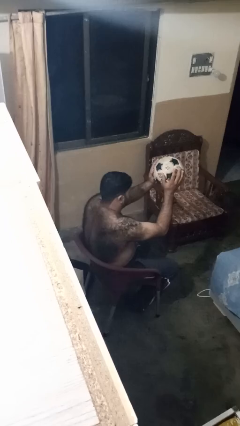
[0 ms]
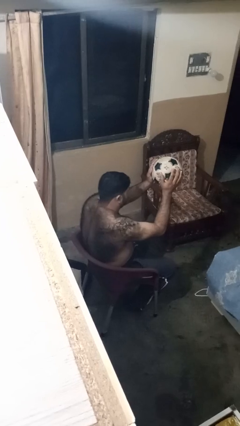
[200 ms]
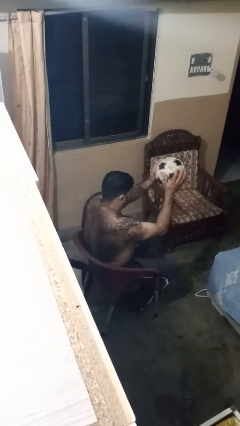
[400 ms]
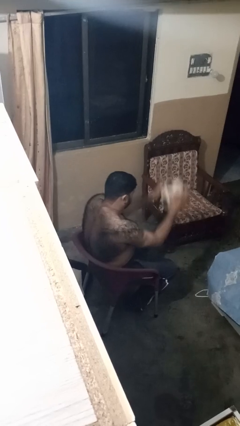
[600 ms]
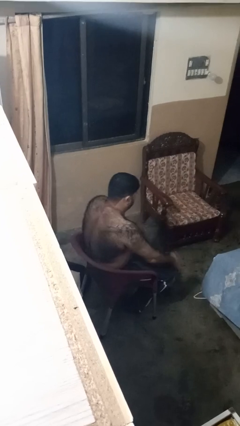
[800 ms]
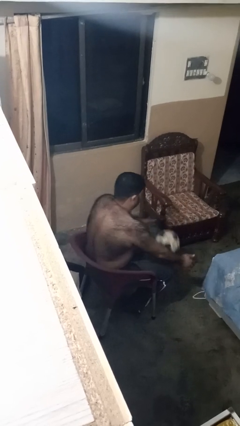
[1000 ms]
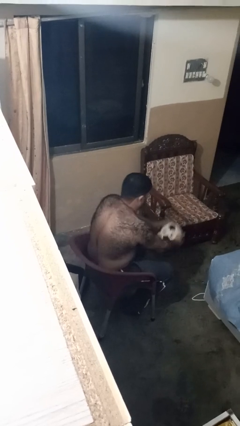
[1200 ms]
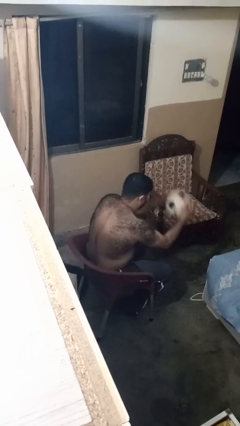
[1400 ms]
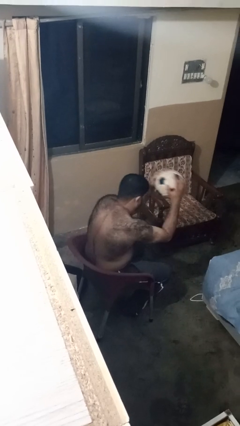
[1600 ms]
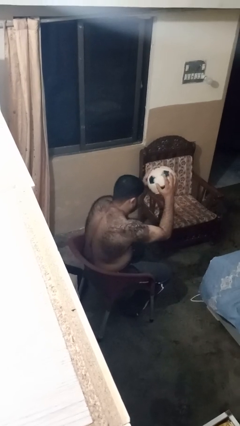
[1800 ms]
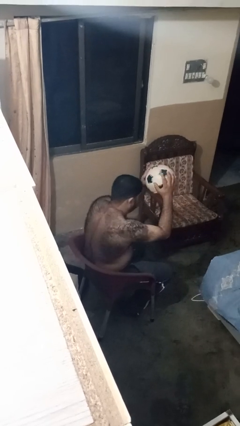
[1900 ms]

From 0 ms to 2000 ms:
person bounces ball on floor

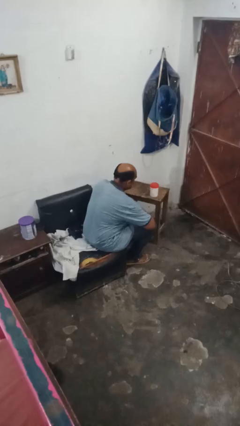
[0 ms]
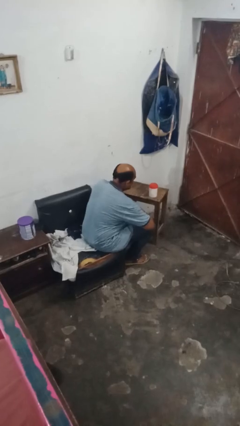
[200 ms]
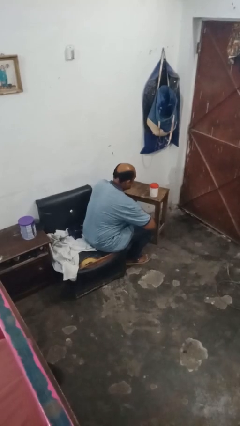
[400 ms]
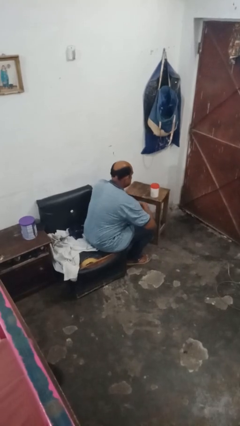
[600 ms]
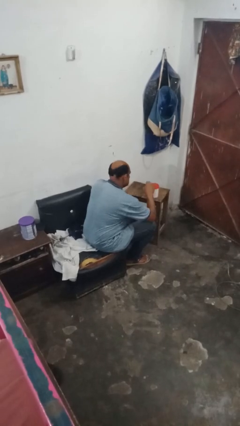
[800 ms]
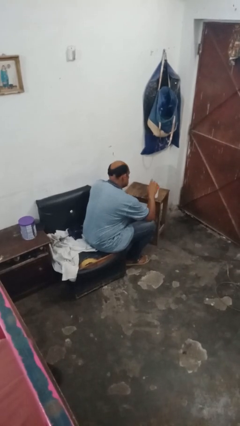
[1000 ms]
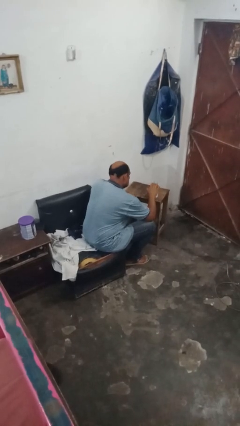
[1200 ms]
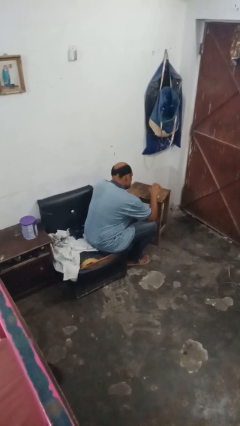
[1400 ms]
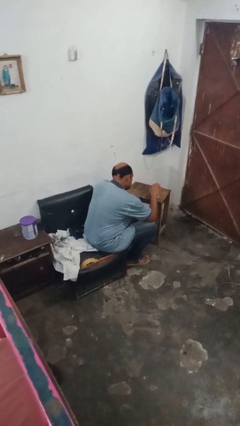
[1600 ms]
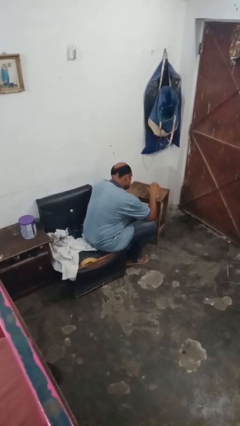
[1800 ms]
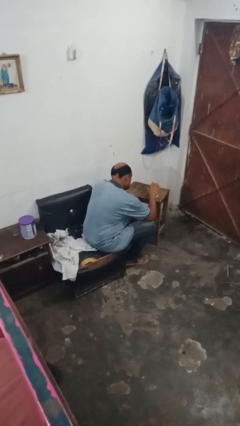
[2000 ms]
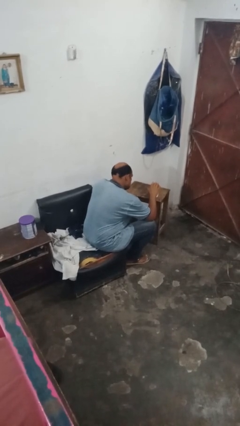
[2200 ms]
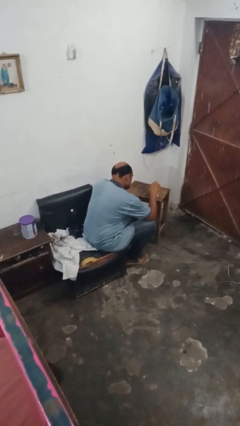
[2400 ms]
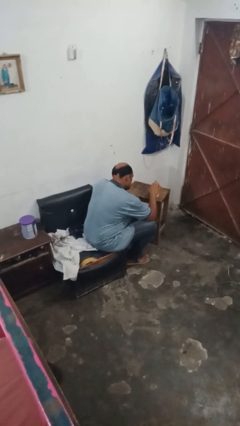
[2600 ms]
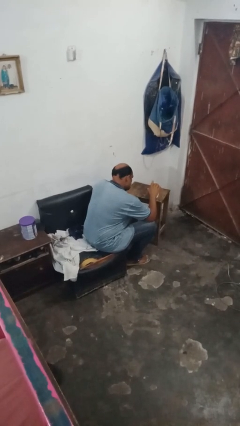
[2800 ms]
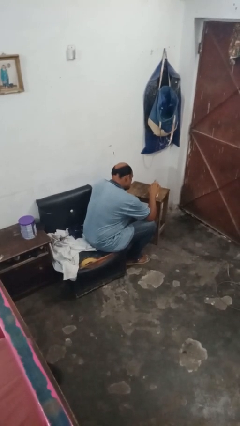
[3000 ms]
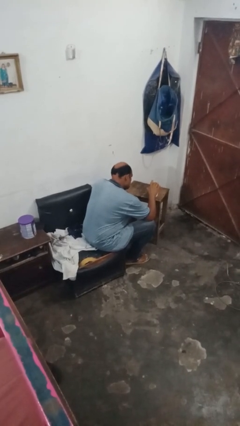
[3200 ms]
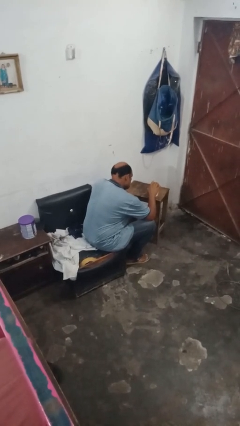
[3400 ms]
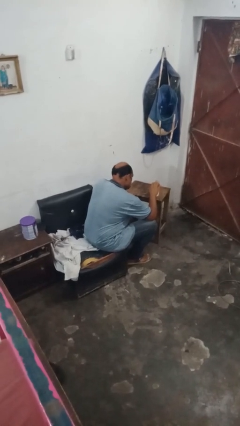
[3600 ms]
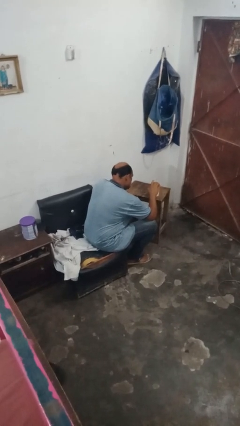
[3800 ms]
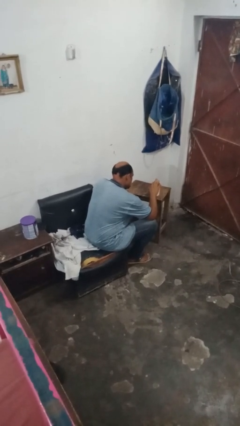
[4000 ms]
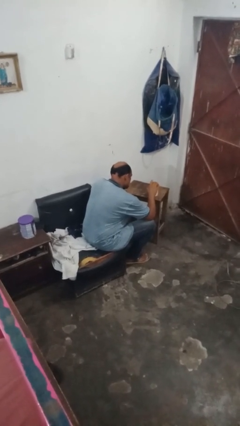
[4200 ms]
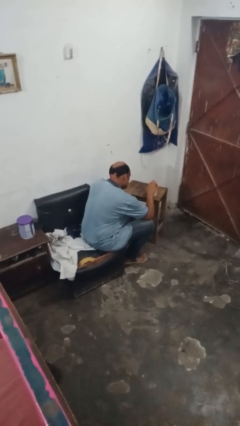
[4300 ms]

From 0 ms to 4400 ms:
person taps object with finger

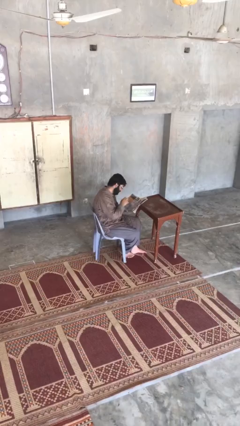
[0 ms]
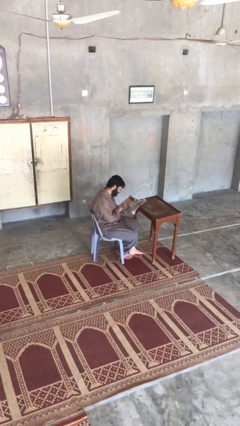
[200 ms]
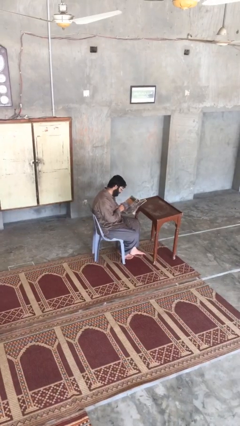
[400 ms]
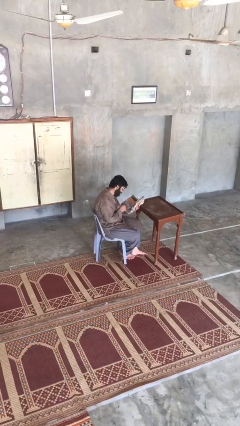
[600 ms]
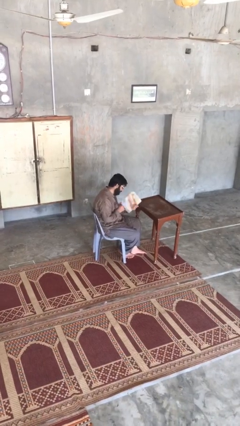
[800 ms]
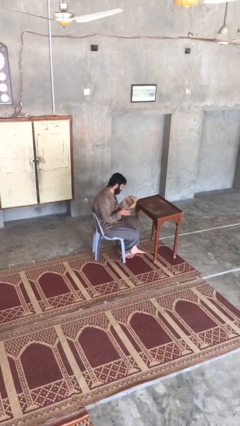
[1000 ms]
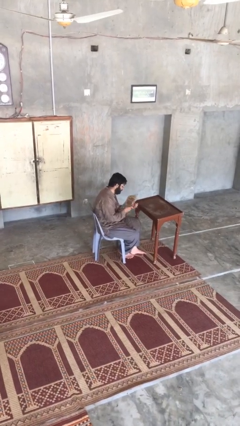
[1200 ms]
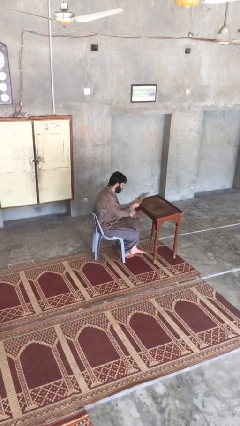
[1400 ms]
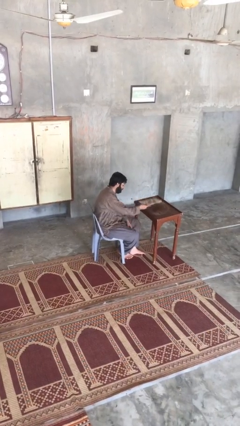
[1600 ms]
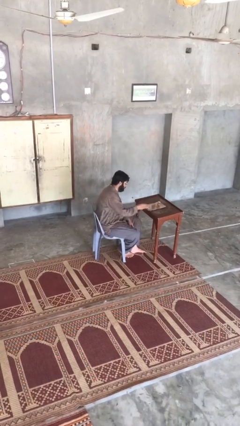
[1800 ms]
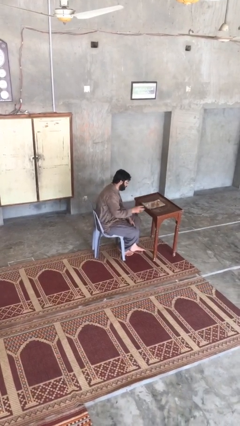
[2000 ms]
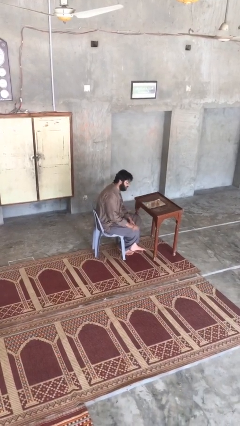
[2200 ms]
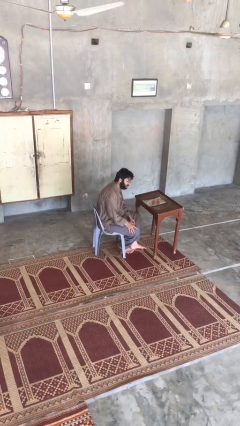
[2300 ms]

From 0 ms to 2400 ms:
person puts down object on table

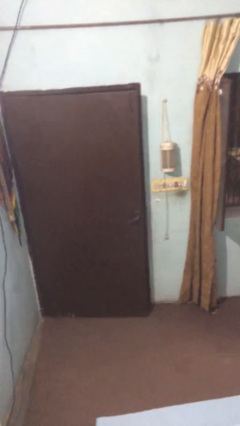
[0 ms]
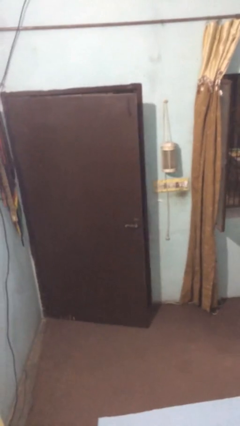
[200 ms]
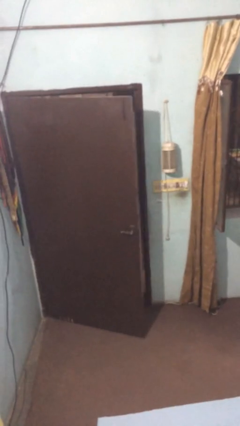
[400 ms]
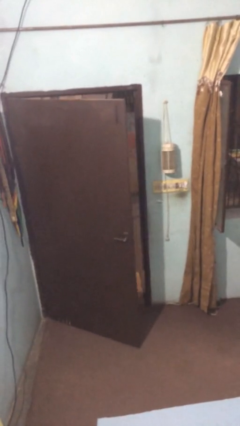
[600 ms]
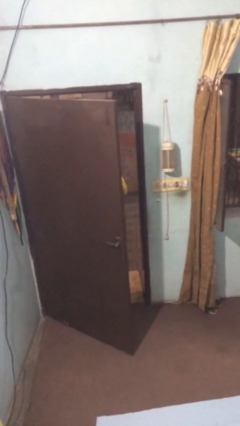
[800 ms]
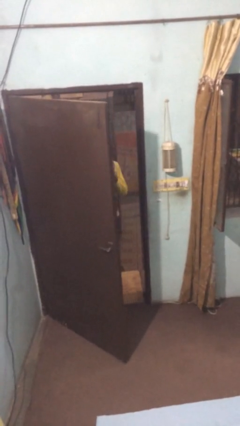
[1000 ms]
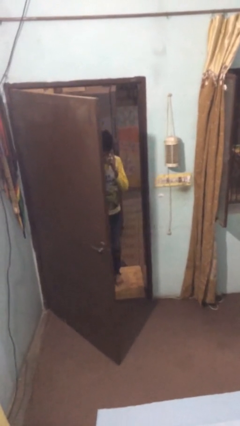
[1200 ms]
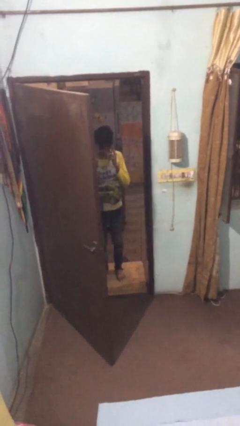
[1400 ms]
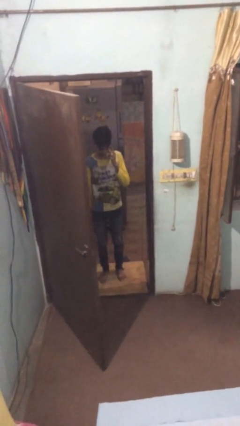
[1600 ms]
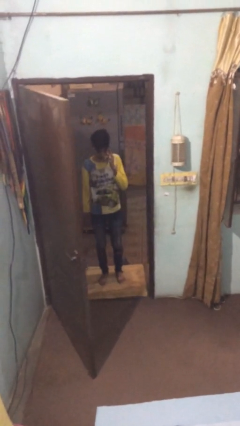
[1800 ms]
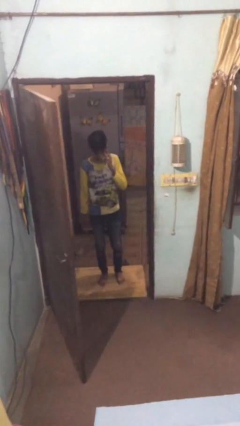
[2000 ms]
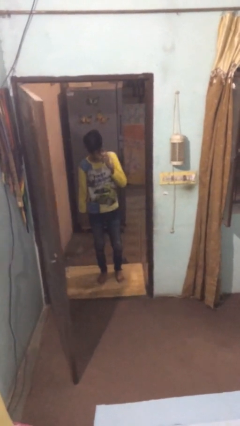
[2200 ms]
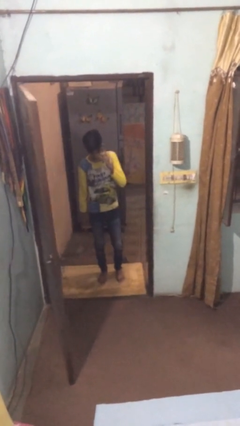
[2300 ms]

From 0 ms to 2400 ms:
person opens facility door

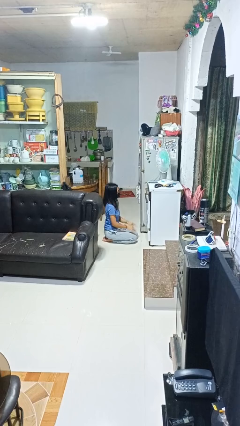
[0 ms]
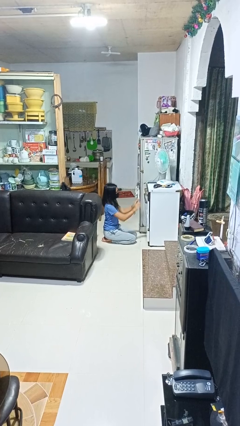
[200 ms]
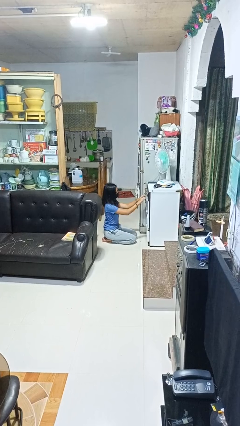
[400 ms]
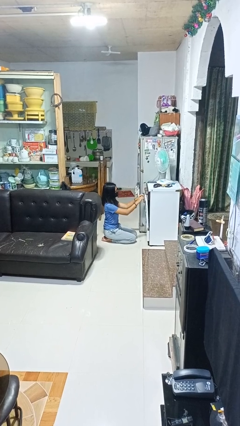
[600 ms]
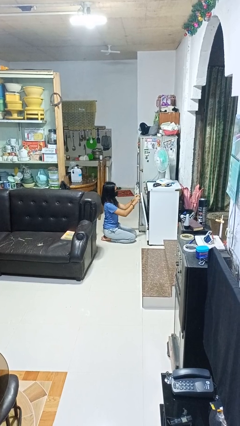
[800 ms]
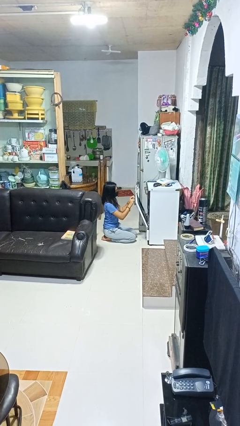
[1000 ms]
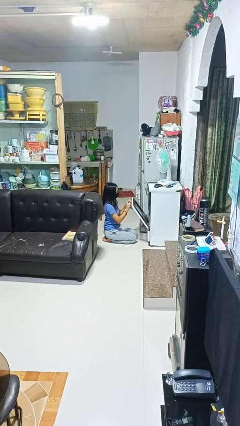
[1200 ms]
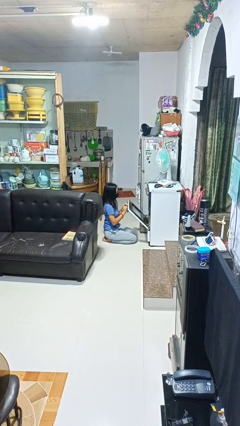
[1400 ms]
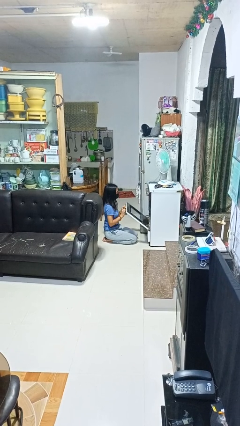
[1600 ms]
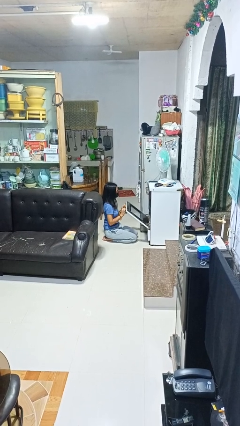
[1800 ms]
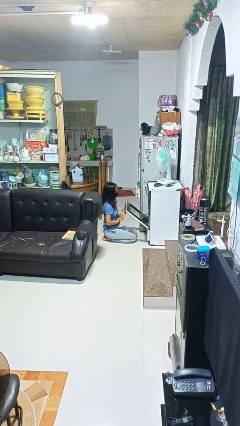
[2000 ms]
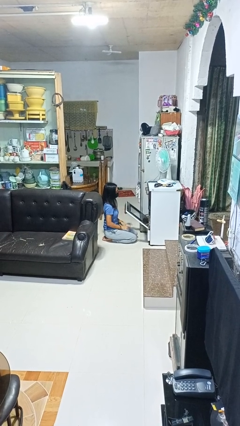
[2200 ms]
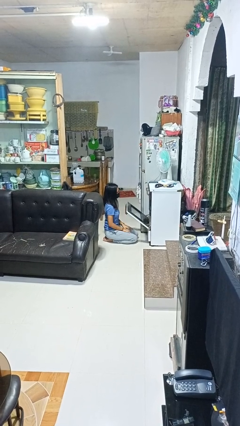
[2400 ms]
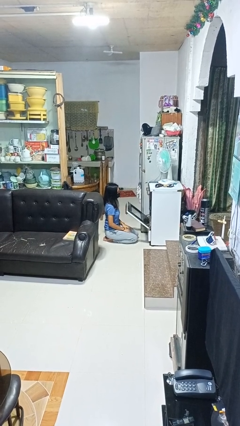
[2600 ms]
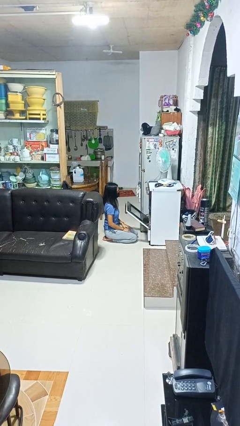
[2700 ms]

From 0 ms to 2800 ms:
person opens oven door

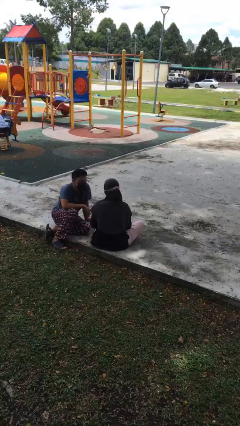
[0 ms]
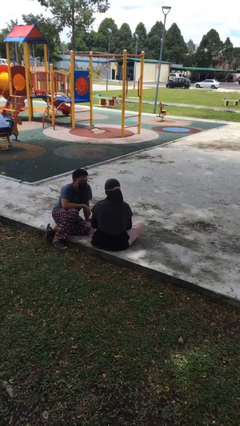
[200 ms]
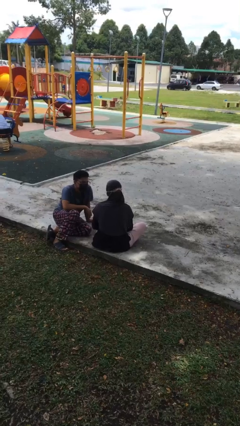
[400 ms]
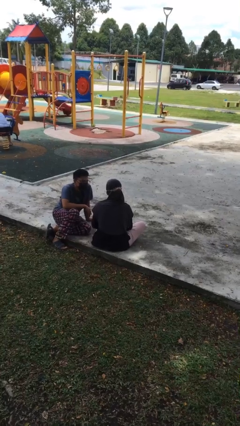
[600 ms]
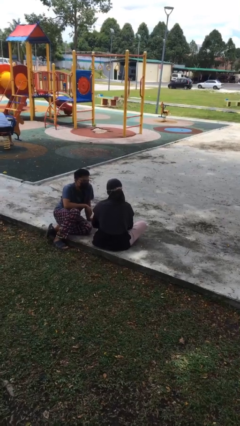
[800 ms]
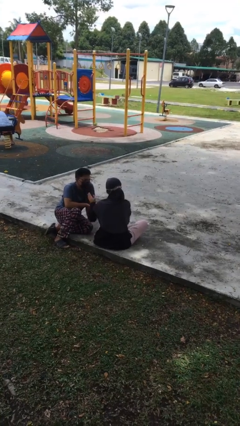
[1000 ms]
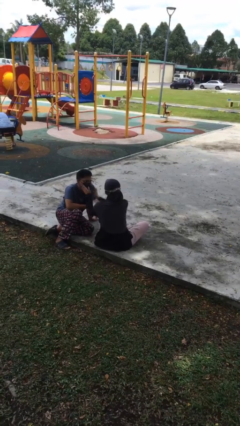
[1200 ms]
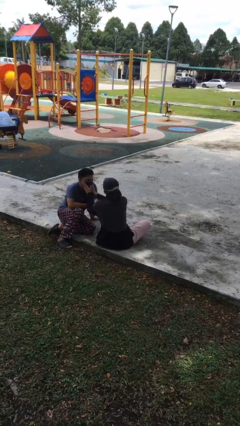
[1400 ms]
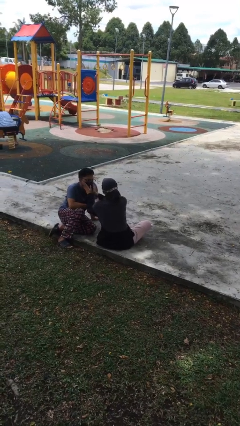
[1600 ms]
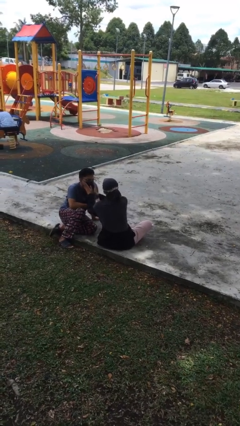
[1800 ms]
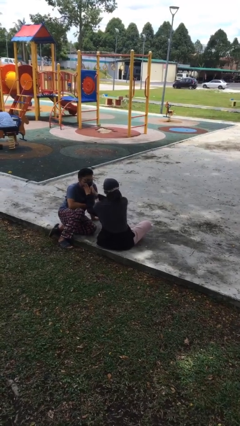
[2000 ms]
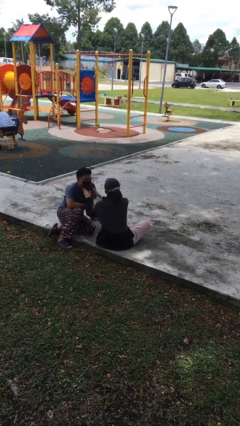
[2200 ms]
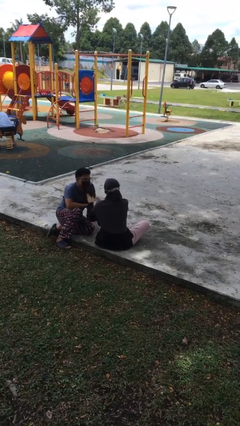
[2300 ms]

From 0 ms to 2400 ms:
person touches face of person

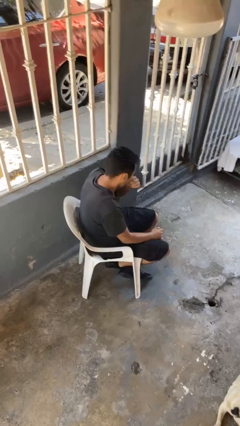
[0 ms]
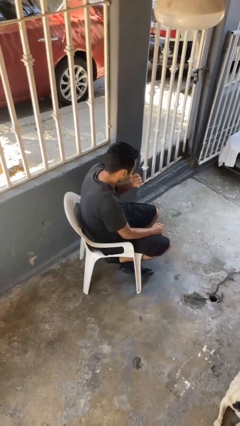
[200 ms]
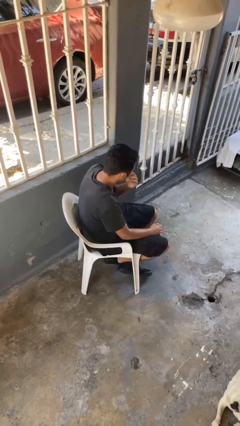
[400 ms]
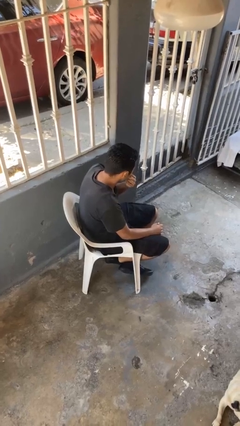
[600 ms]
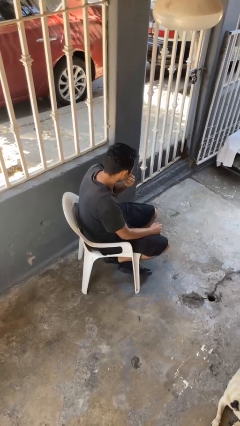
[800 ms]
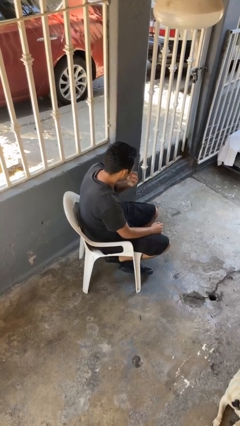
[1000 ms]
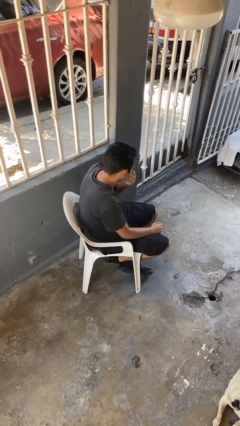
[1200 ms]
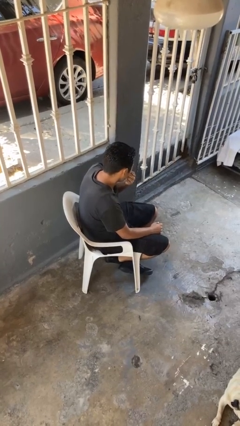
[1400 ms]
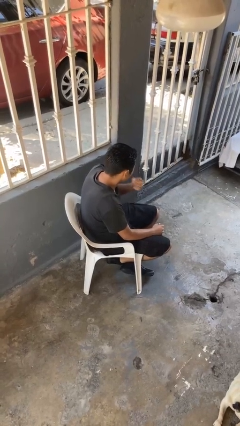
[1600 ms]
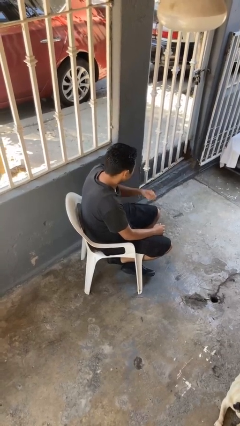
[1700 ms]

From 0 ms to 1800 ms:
person licks fingers
